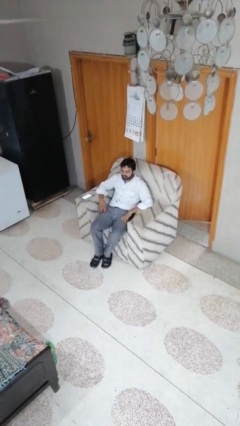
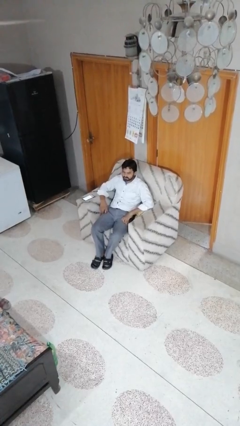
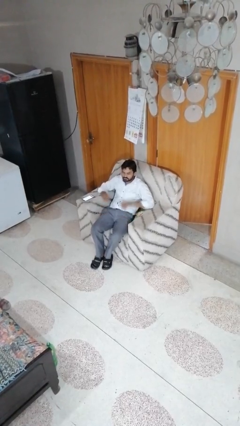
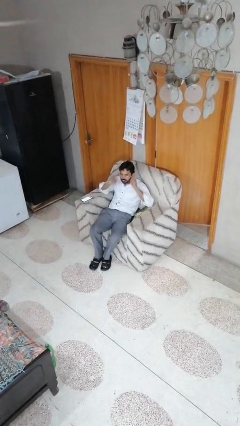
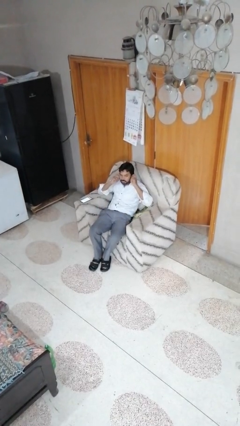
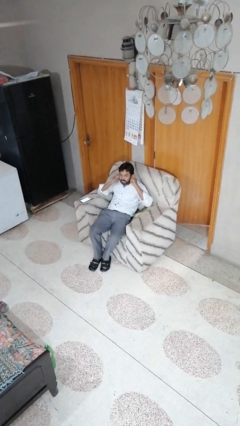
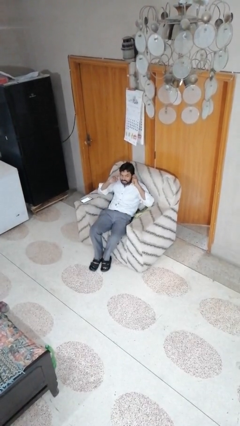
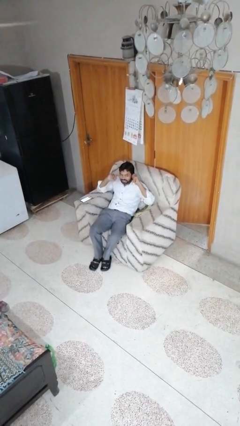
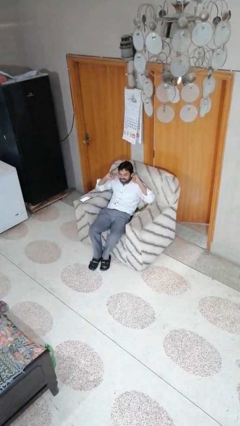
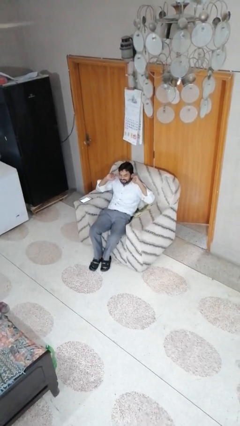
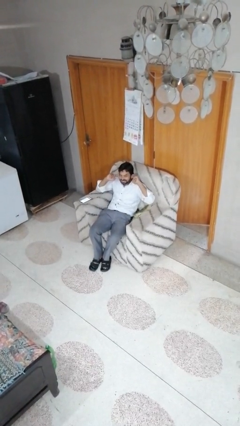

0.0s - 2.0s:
person puts fingers in ear

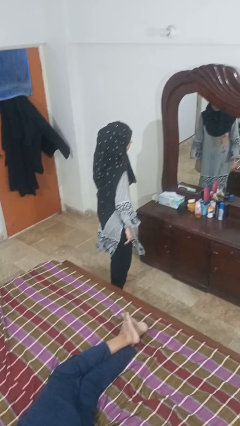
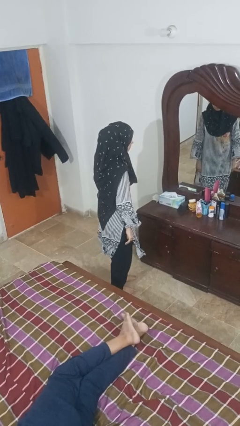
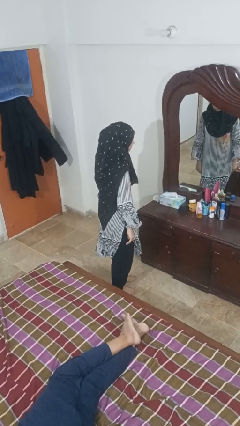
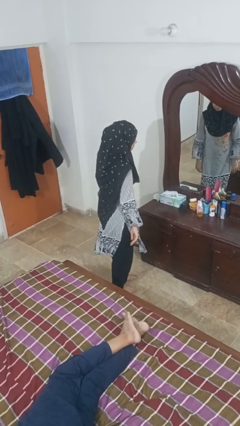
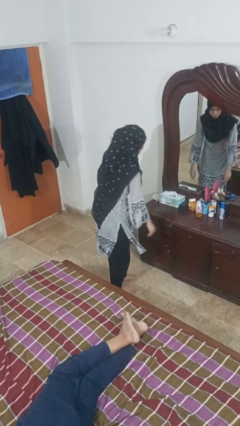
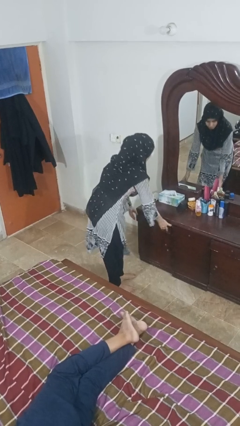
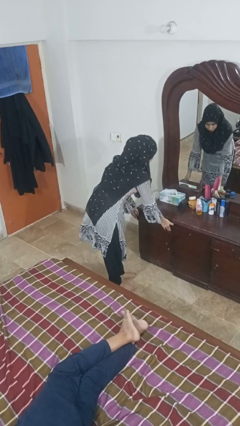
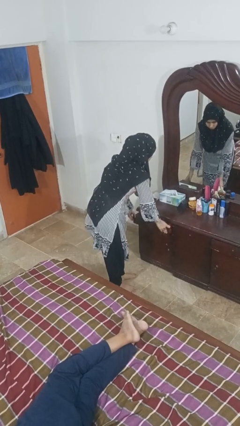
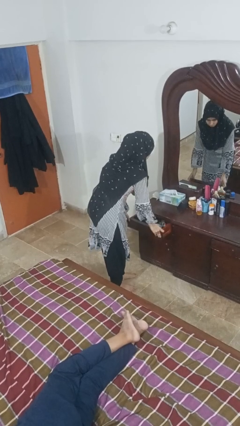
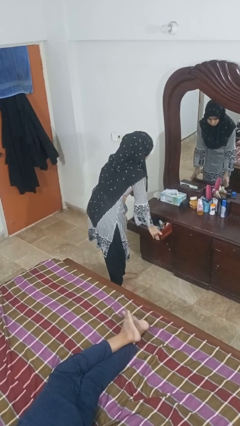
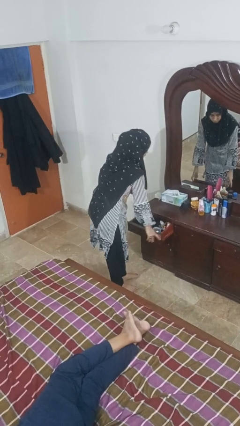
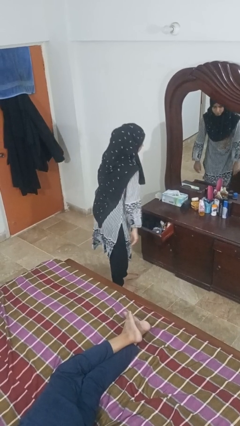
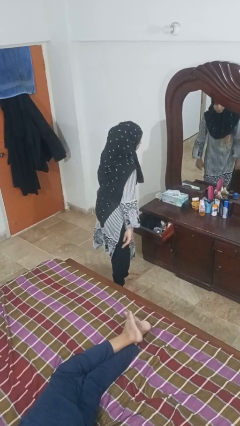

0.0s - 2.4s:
person opens dresser drawer

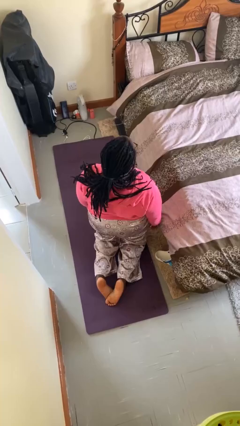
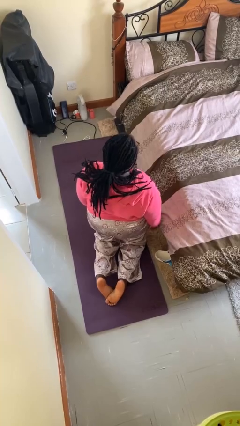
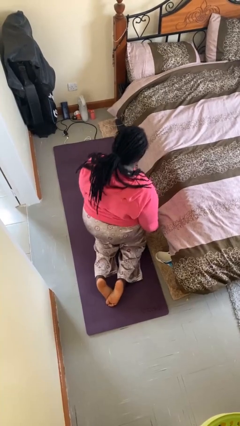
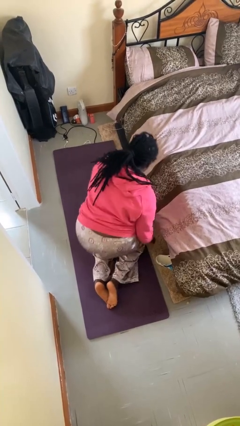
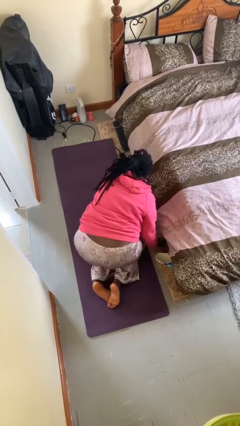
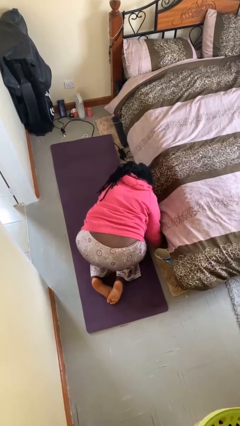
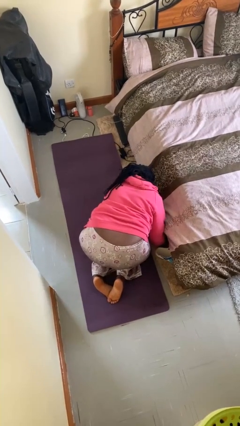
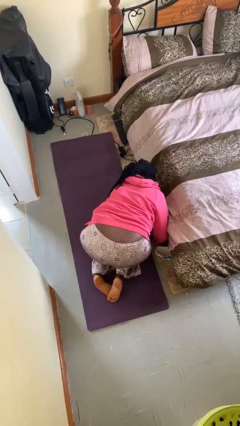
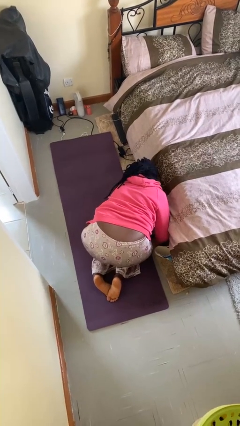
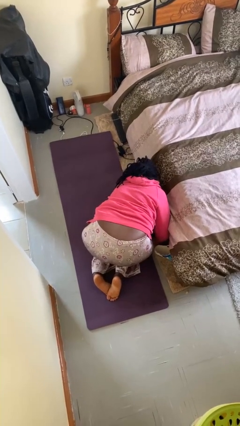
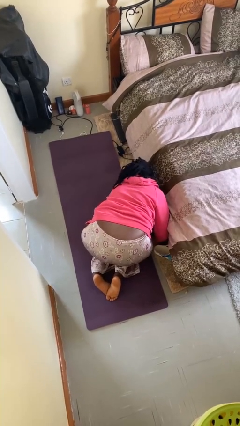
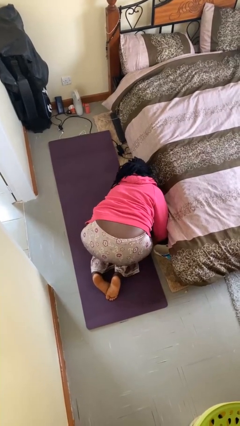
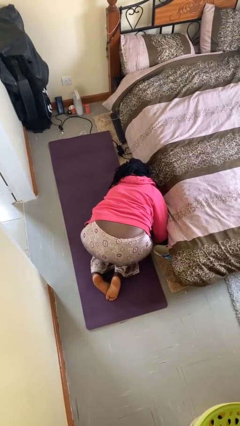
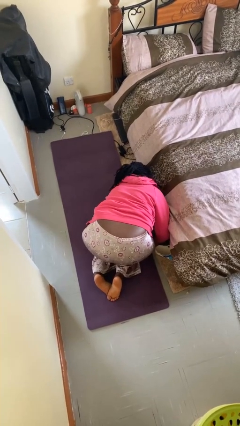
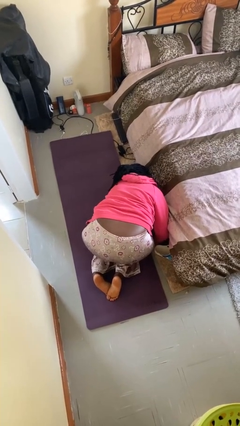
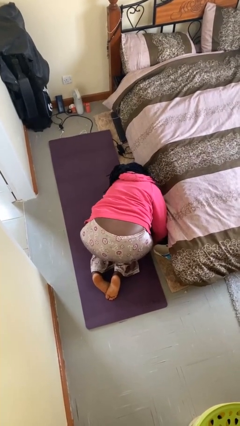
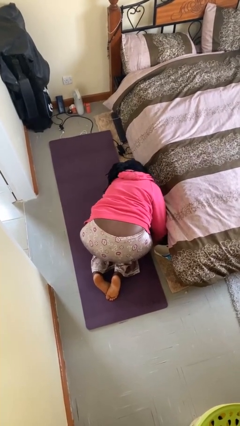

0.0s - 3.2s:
person searches under bed

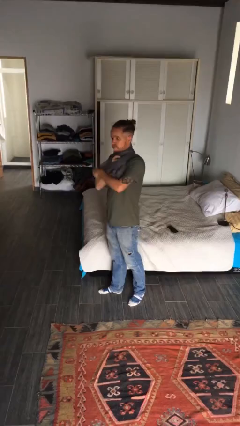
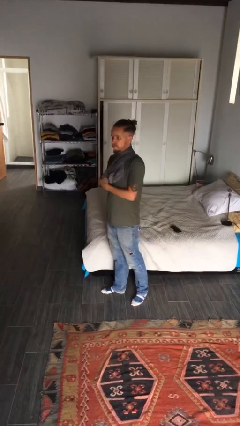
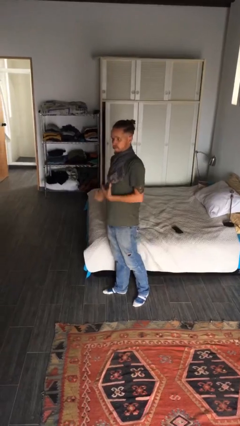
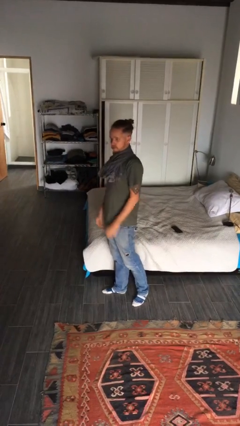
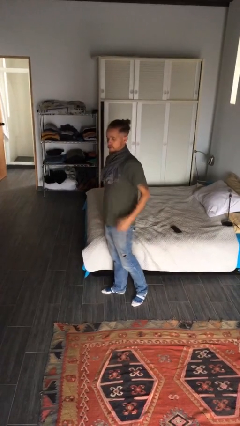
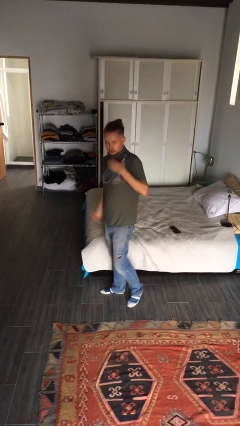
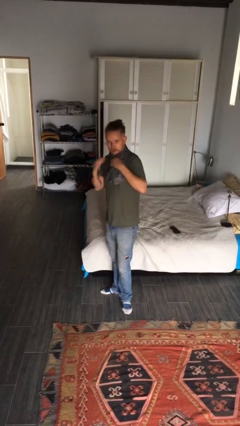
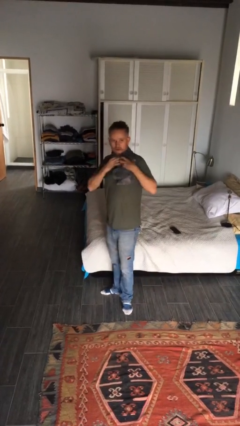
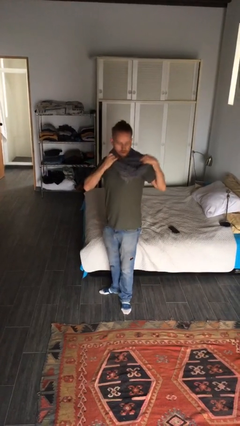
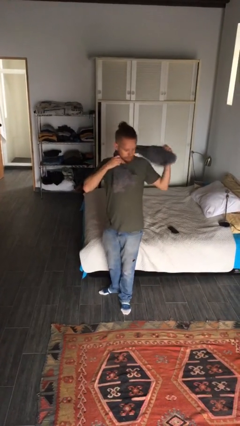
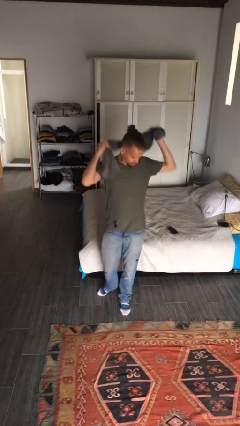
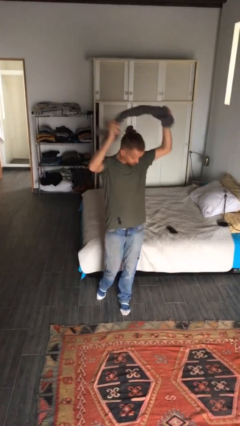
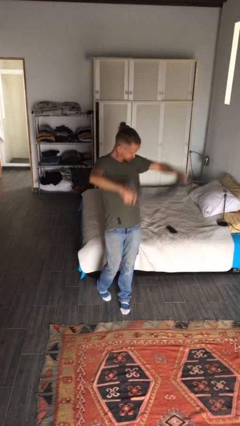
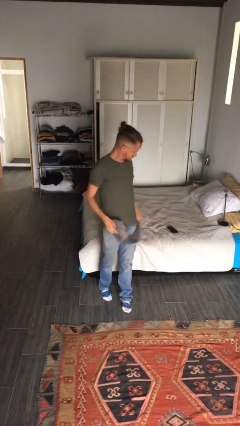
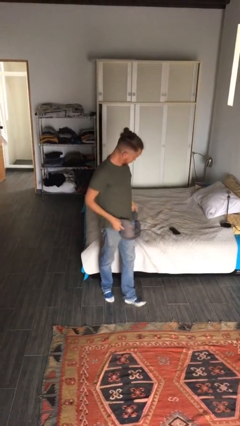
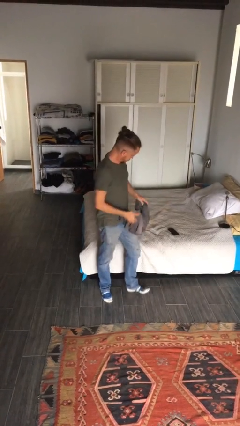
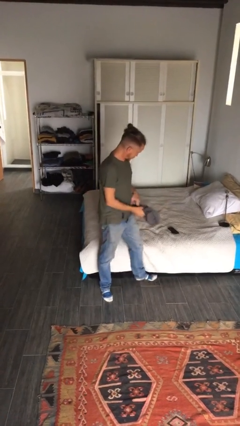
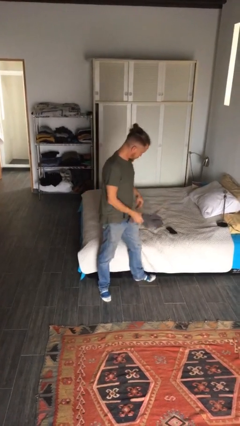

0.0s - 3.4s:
person takes off scarf

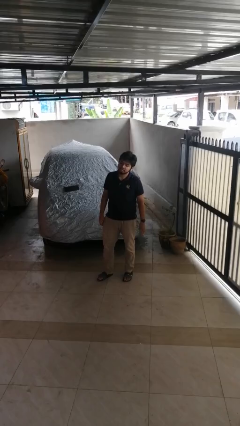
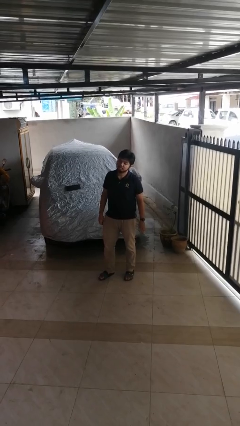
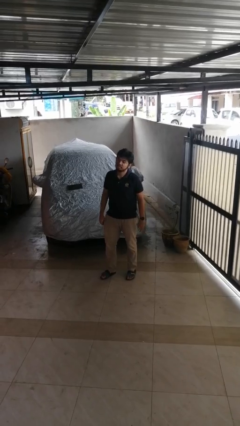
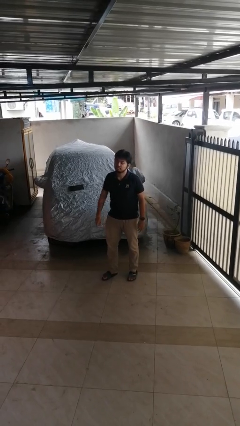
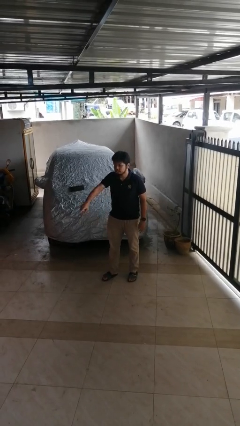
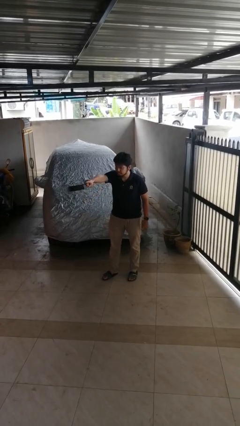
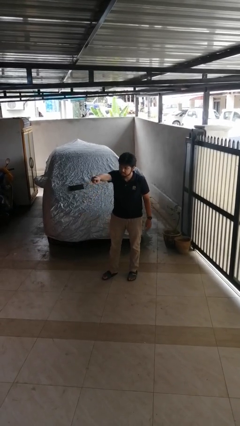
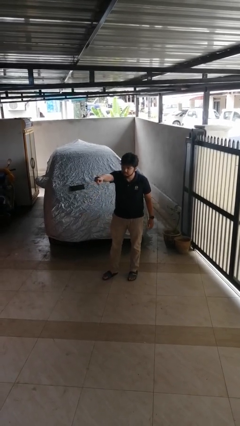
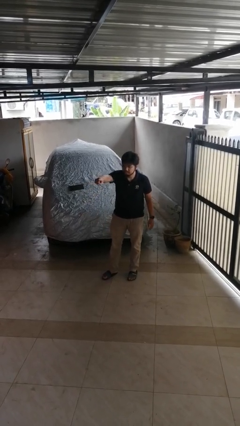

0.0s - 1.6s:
person points at person

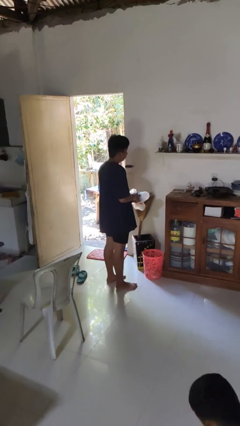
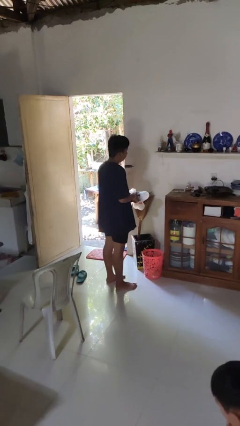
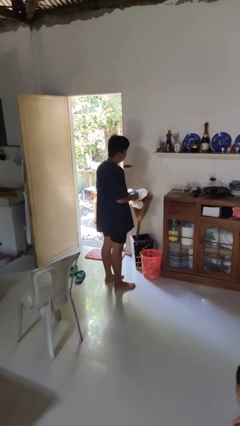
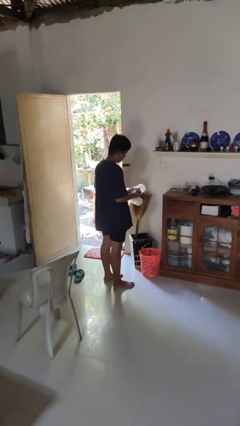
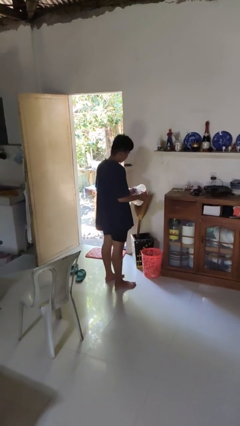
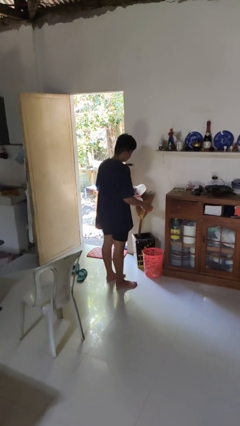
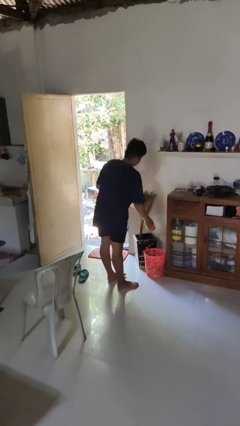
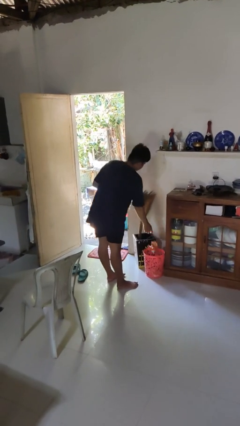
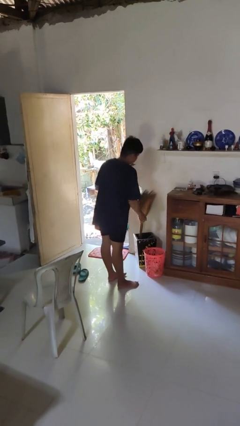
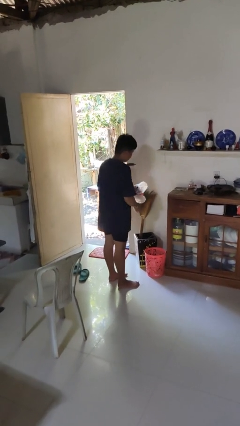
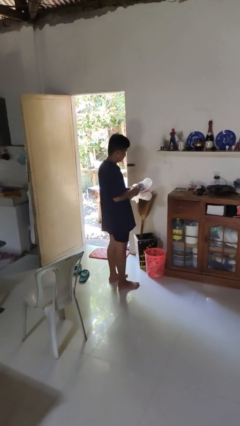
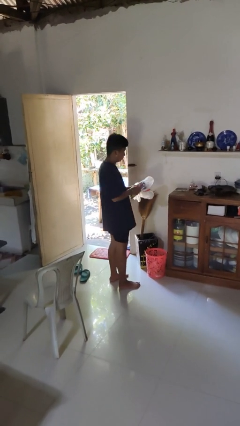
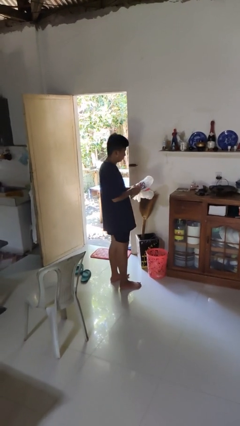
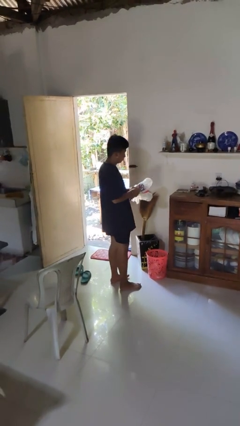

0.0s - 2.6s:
person discards trash

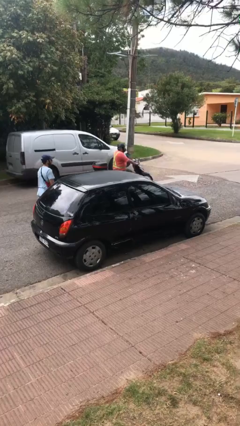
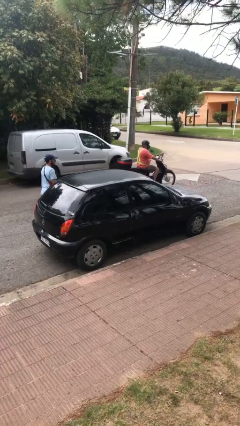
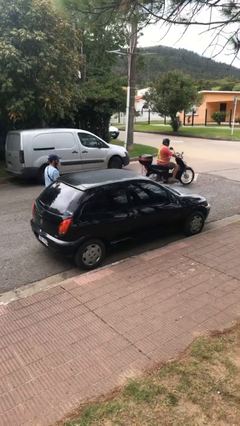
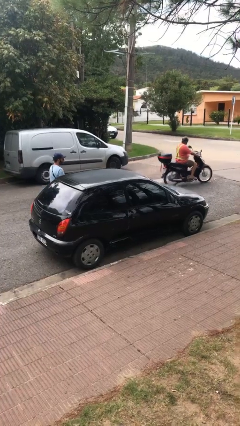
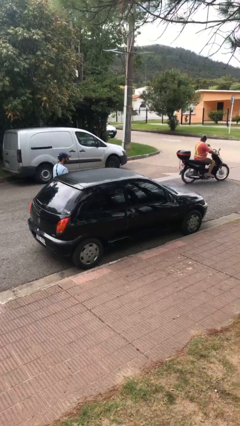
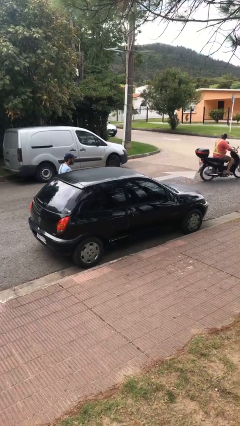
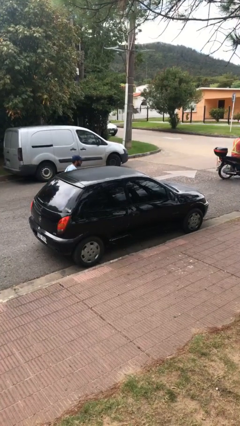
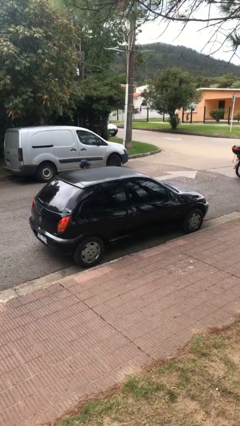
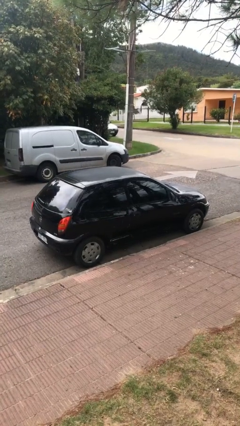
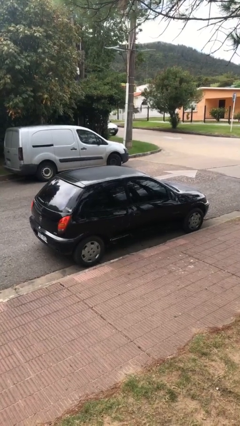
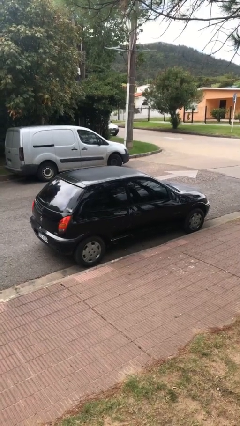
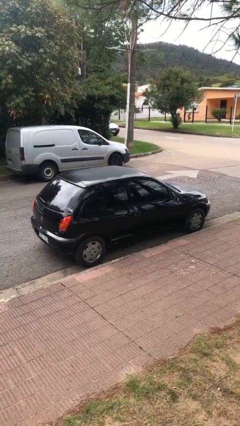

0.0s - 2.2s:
car picks up person
